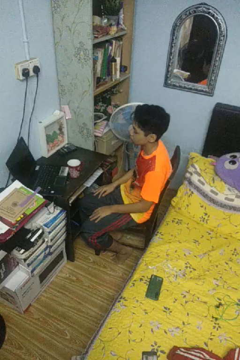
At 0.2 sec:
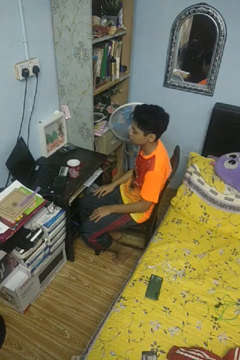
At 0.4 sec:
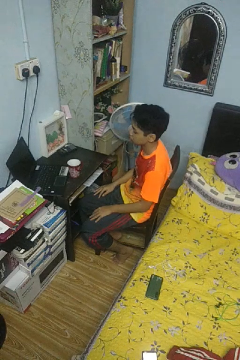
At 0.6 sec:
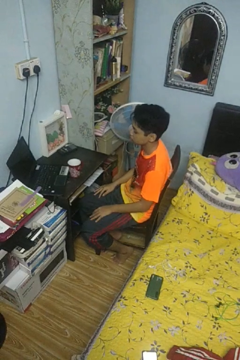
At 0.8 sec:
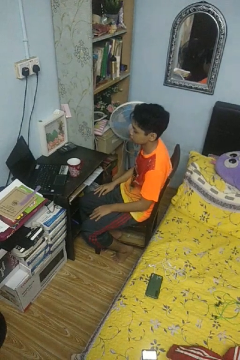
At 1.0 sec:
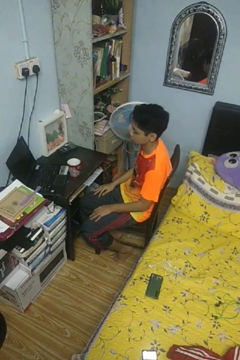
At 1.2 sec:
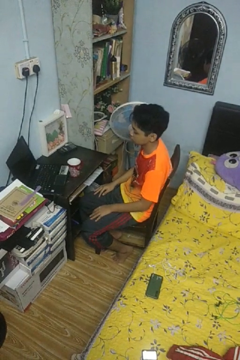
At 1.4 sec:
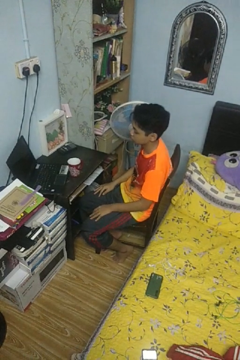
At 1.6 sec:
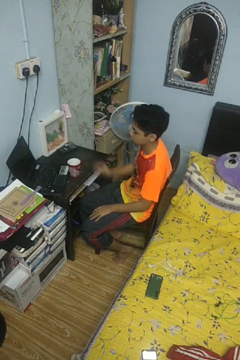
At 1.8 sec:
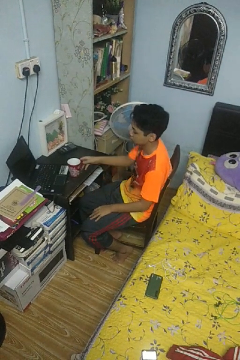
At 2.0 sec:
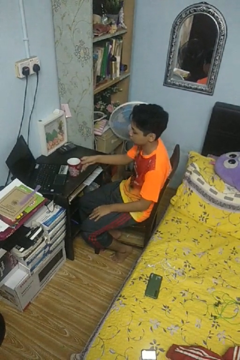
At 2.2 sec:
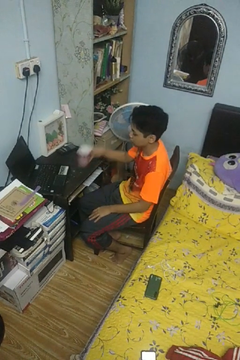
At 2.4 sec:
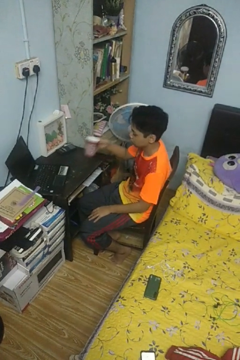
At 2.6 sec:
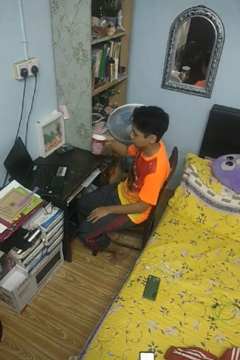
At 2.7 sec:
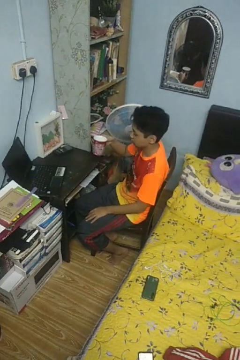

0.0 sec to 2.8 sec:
person opens refrigerator

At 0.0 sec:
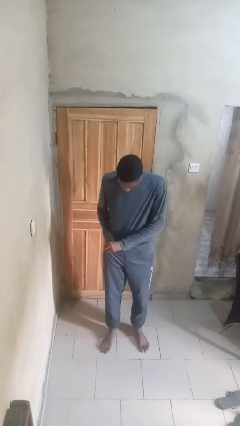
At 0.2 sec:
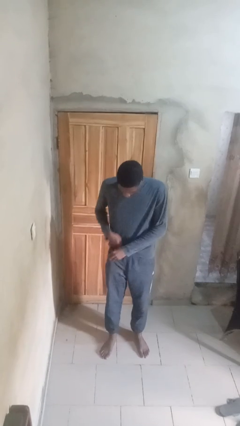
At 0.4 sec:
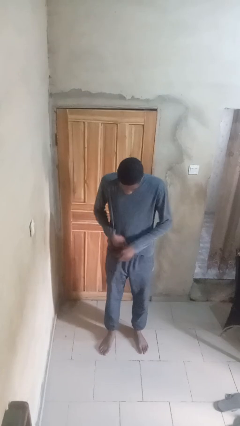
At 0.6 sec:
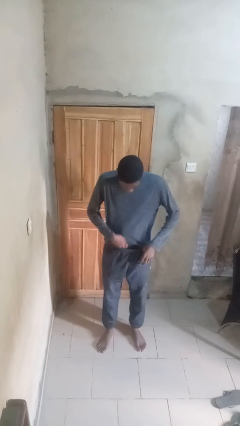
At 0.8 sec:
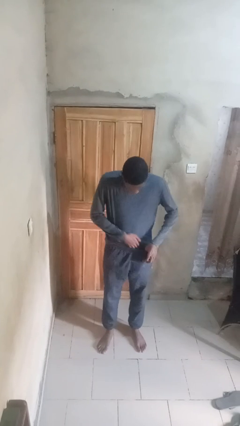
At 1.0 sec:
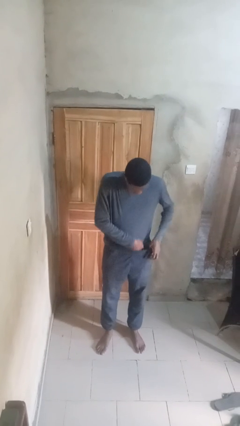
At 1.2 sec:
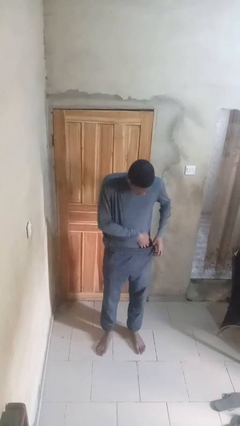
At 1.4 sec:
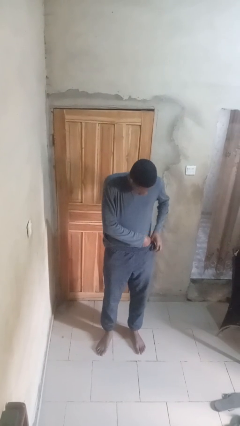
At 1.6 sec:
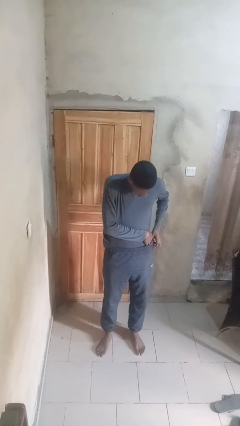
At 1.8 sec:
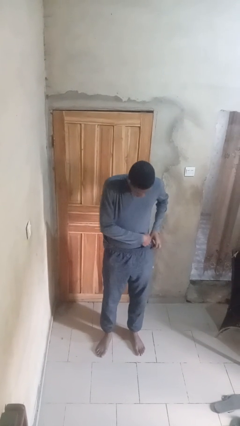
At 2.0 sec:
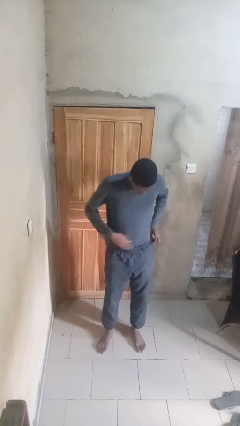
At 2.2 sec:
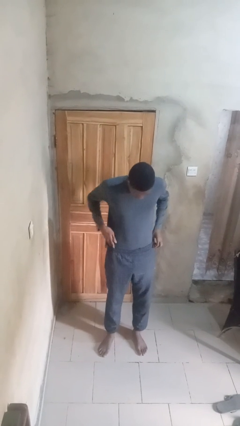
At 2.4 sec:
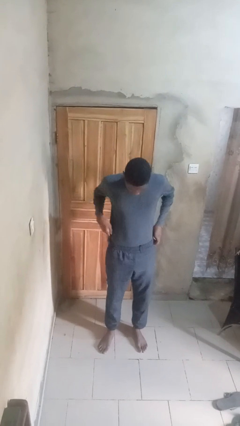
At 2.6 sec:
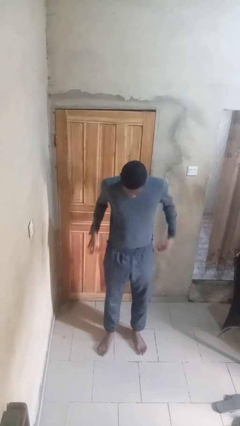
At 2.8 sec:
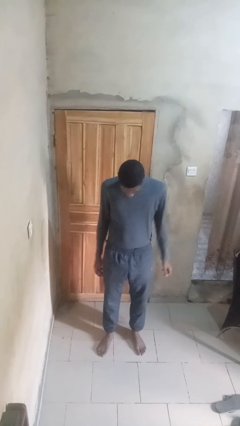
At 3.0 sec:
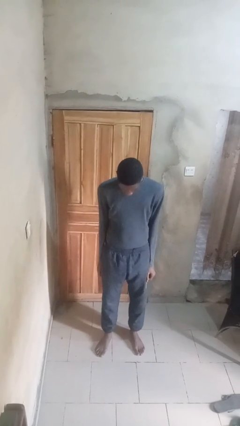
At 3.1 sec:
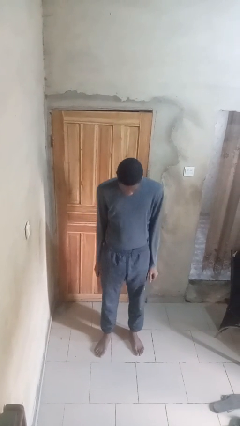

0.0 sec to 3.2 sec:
person tucks in shirt

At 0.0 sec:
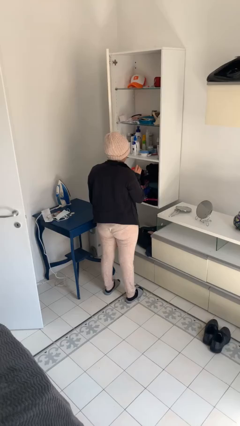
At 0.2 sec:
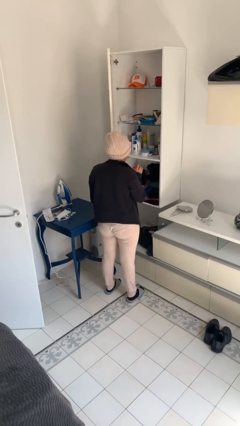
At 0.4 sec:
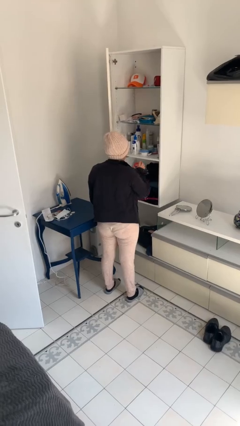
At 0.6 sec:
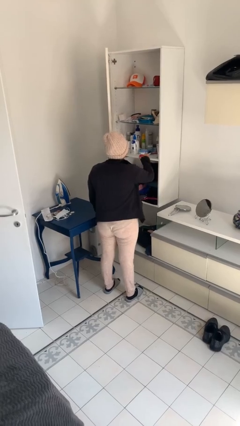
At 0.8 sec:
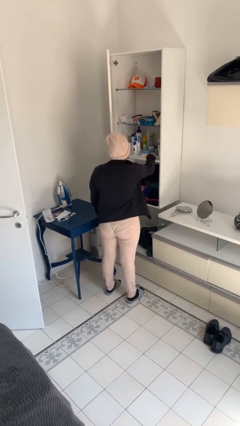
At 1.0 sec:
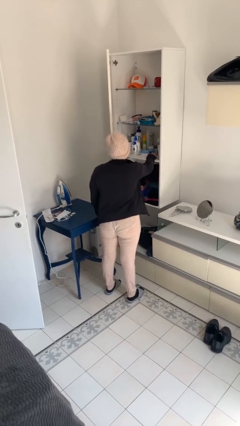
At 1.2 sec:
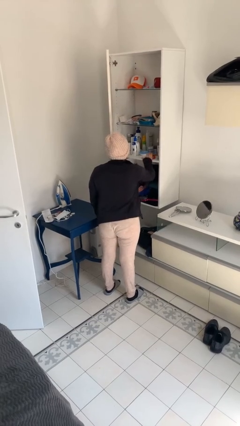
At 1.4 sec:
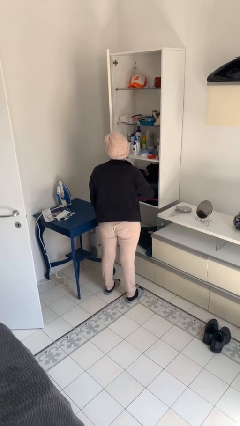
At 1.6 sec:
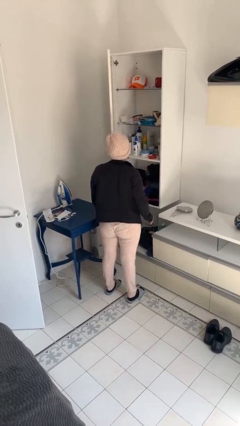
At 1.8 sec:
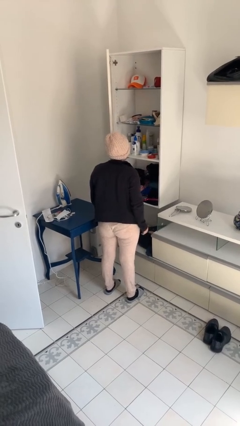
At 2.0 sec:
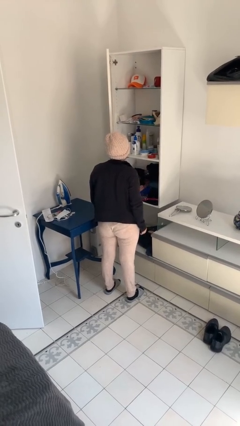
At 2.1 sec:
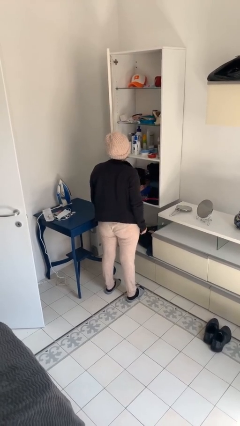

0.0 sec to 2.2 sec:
person puts down object on shelf

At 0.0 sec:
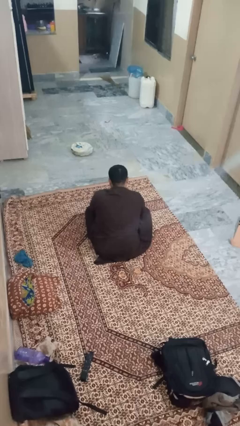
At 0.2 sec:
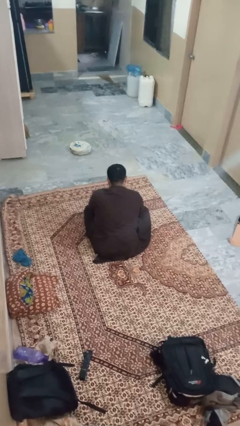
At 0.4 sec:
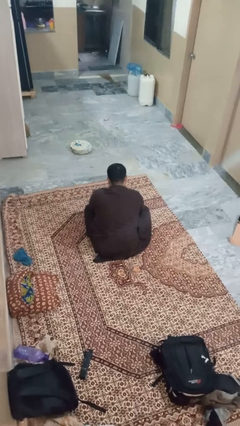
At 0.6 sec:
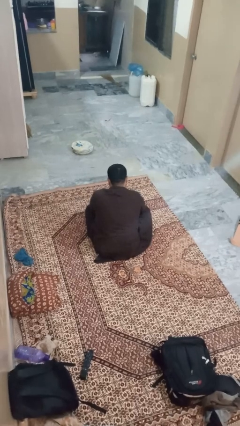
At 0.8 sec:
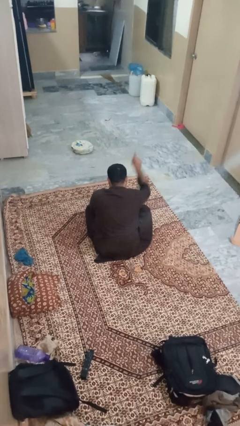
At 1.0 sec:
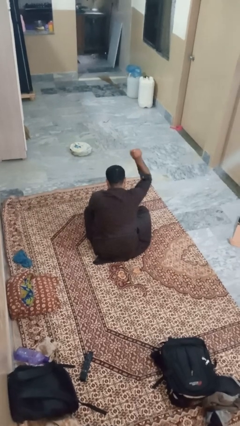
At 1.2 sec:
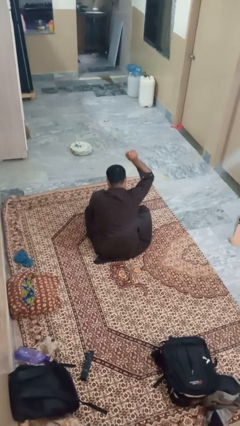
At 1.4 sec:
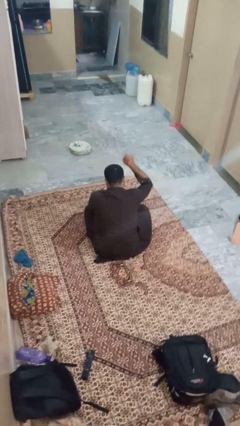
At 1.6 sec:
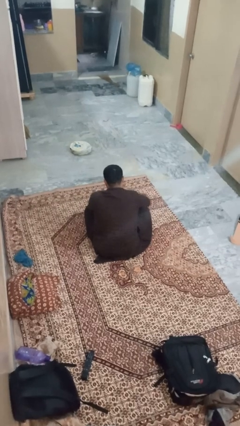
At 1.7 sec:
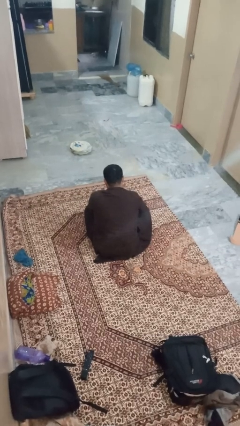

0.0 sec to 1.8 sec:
person gestures number one

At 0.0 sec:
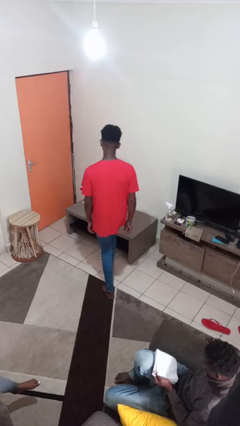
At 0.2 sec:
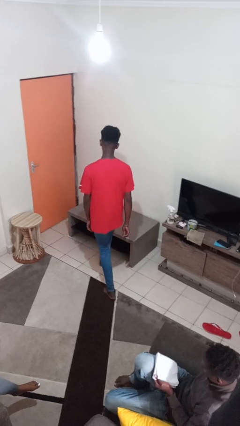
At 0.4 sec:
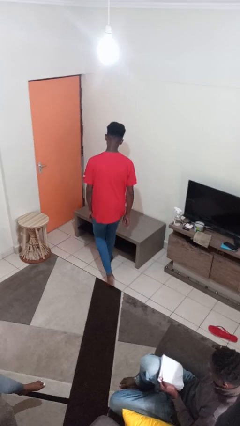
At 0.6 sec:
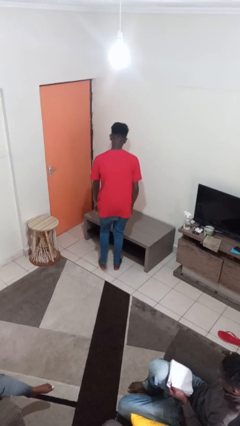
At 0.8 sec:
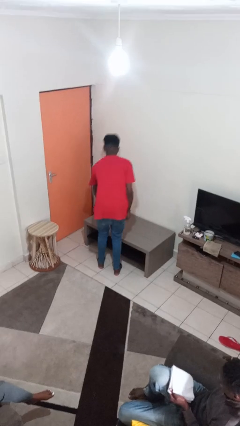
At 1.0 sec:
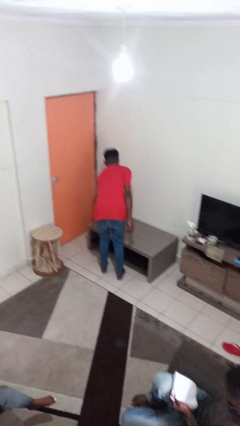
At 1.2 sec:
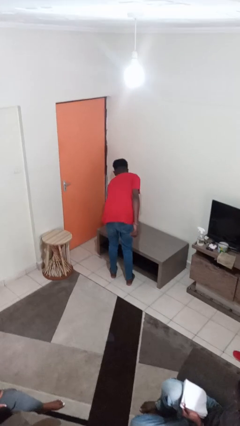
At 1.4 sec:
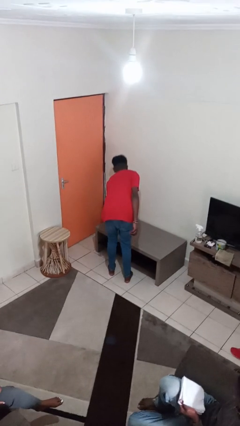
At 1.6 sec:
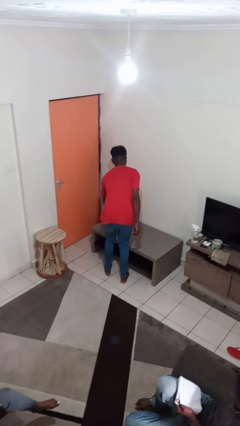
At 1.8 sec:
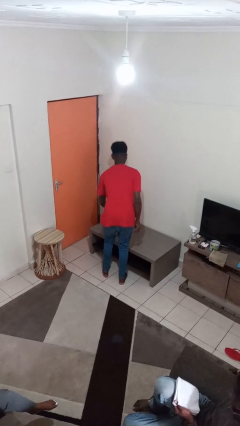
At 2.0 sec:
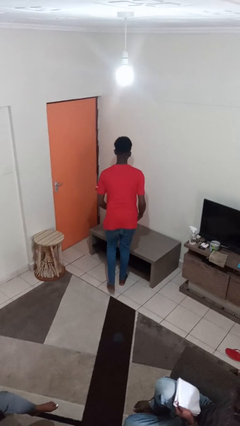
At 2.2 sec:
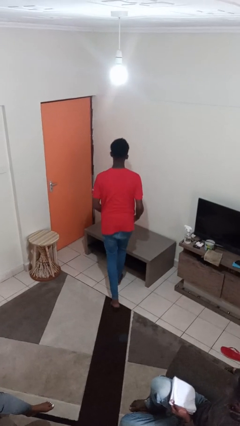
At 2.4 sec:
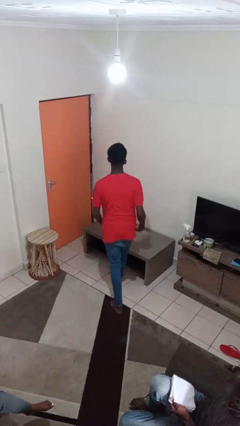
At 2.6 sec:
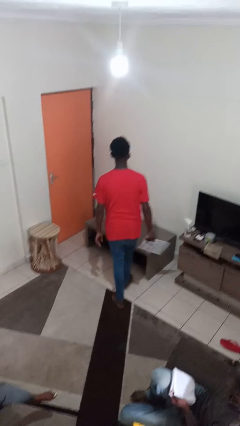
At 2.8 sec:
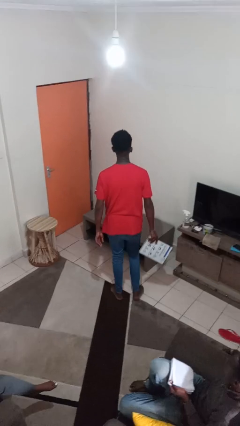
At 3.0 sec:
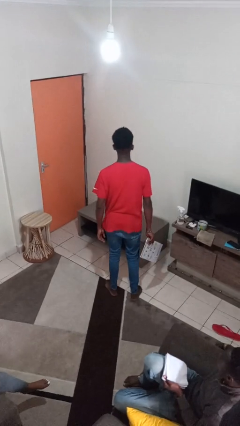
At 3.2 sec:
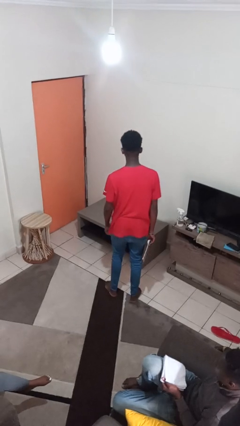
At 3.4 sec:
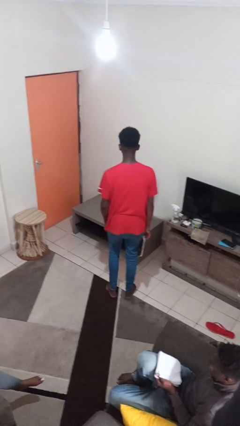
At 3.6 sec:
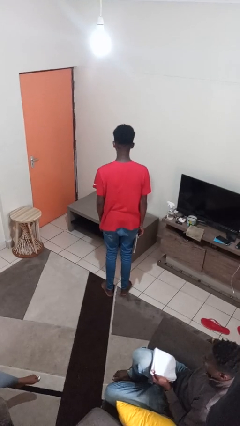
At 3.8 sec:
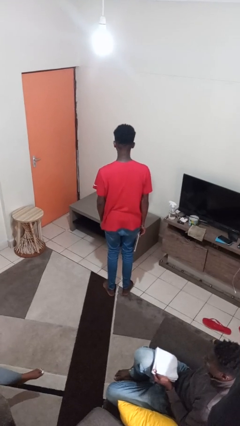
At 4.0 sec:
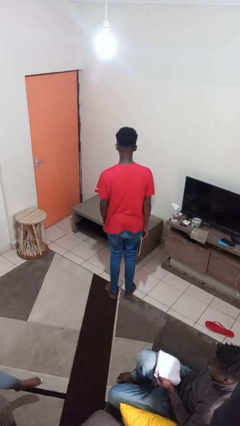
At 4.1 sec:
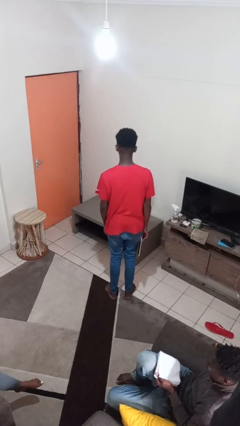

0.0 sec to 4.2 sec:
person picks up object from table

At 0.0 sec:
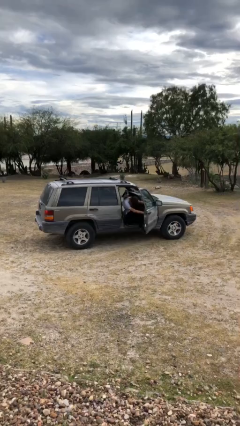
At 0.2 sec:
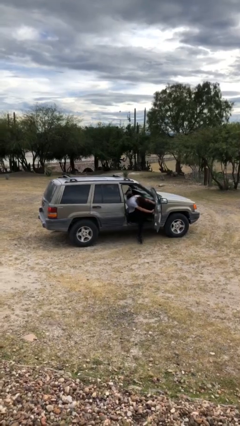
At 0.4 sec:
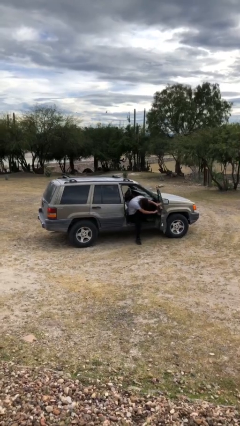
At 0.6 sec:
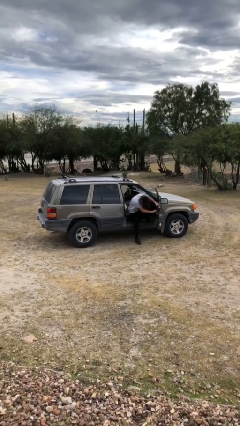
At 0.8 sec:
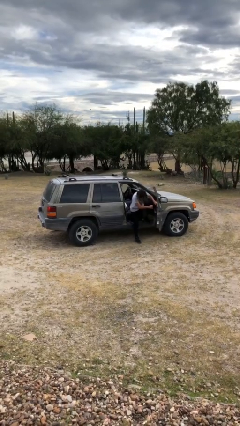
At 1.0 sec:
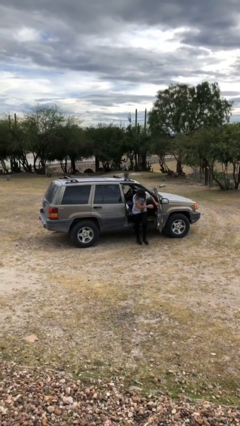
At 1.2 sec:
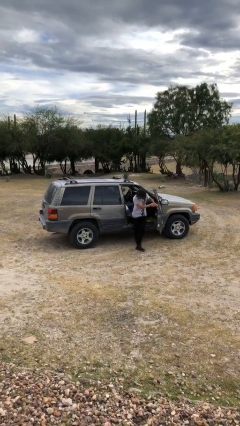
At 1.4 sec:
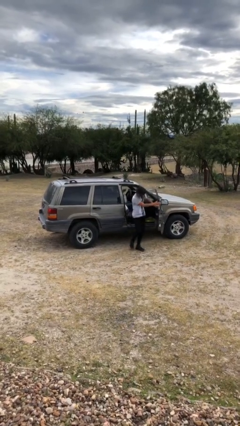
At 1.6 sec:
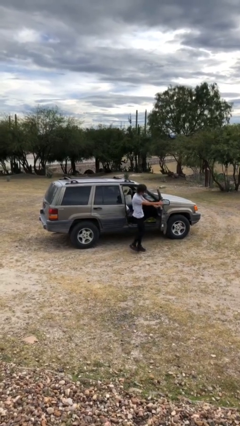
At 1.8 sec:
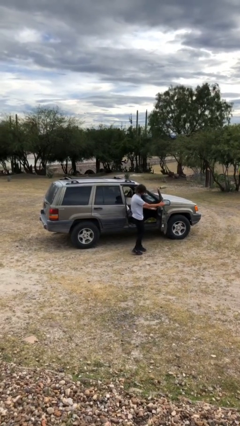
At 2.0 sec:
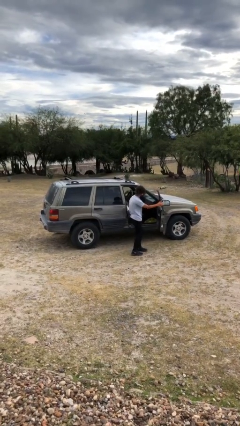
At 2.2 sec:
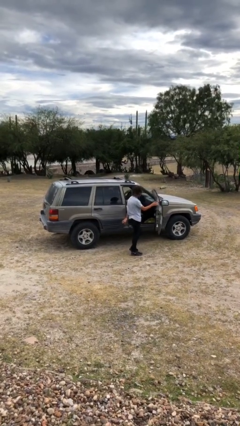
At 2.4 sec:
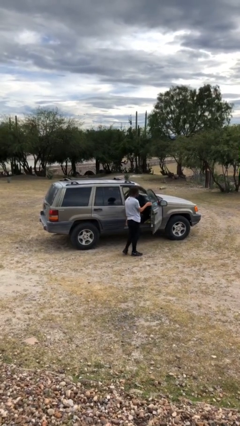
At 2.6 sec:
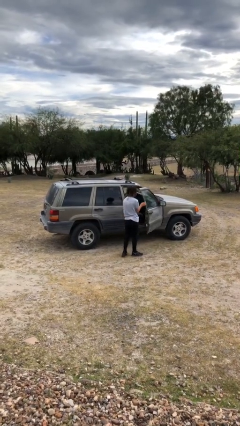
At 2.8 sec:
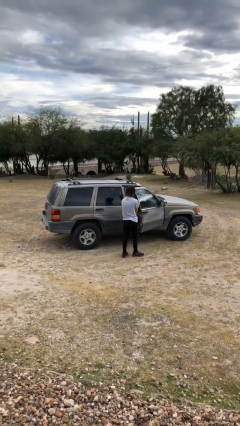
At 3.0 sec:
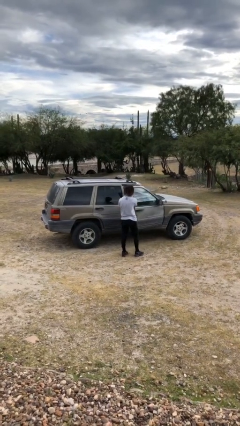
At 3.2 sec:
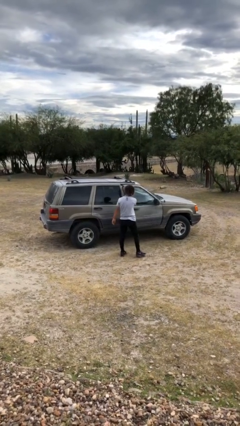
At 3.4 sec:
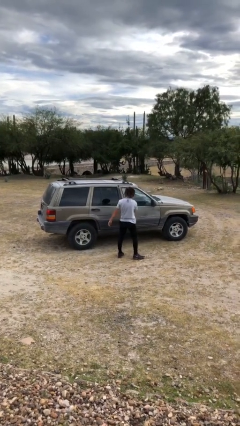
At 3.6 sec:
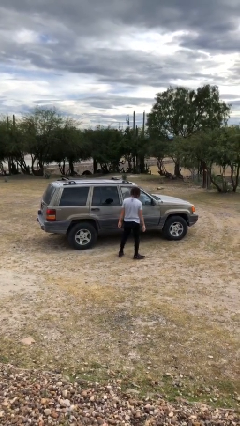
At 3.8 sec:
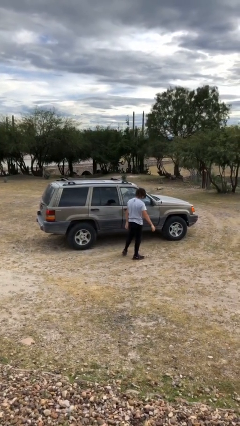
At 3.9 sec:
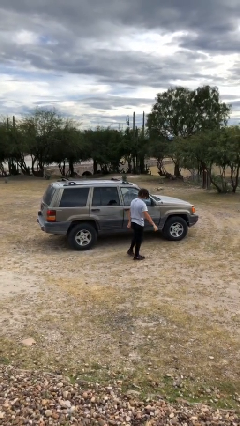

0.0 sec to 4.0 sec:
car drops off person
